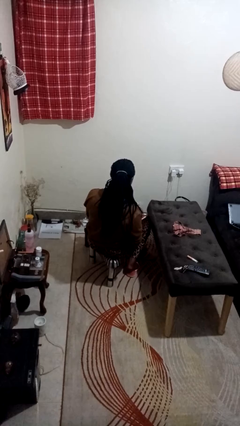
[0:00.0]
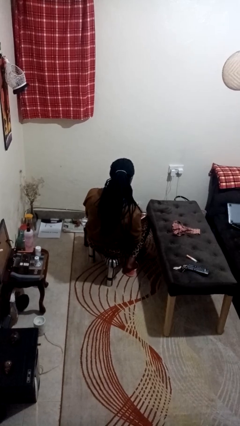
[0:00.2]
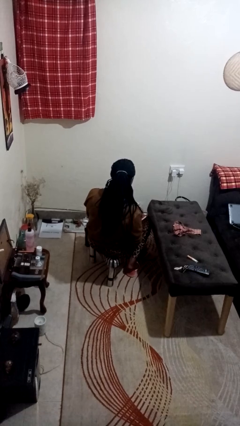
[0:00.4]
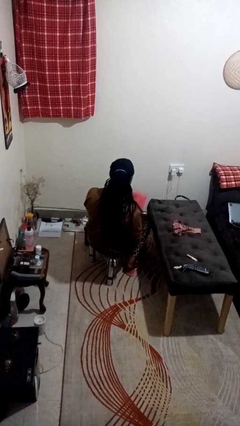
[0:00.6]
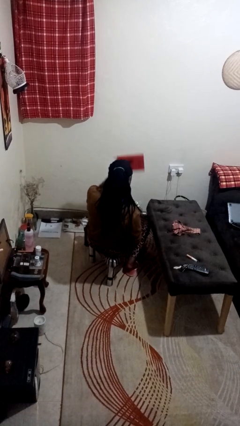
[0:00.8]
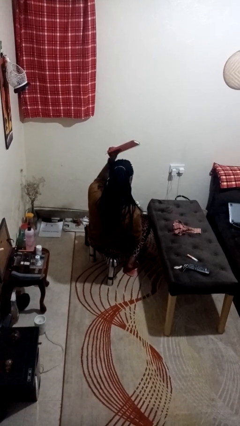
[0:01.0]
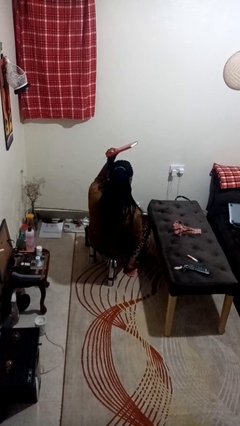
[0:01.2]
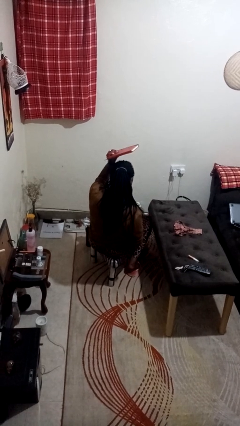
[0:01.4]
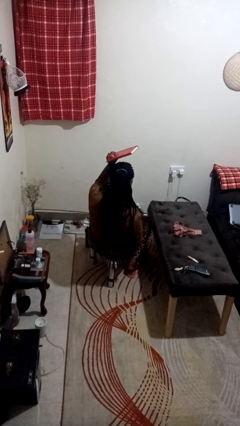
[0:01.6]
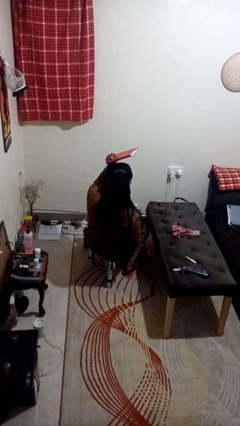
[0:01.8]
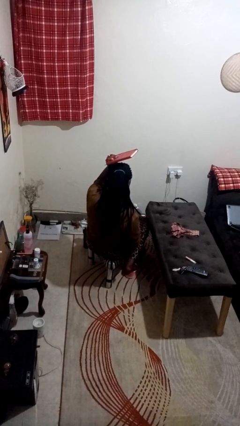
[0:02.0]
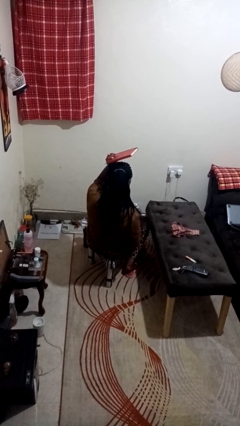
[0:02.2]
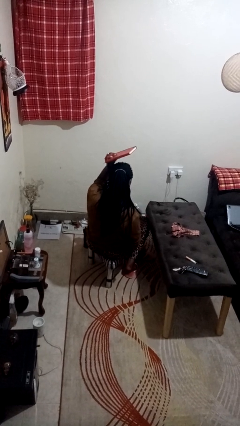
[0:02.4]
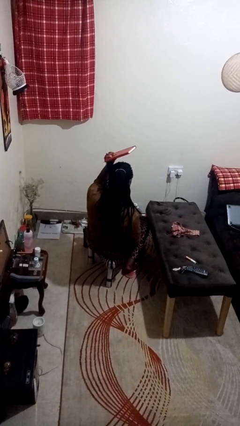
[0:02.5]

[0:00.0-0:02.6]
person holds object above head

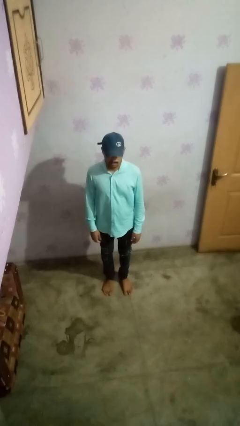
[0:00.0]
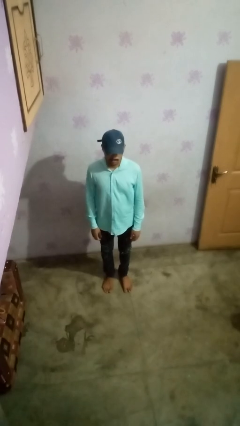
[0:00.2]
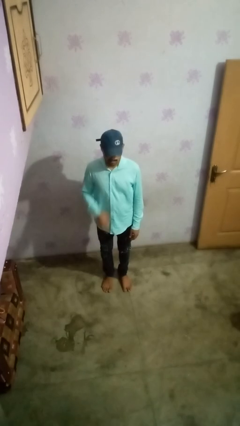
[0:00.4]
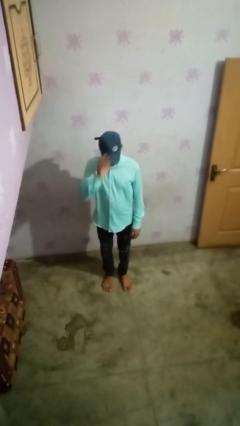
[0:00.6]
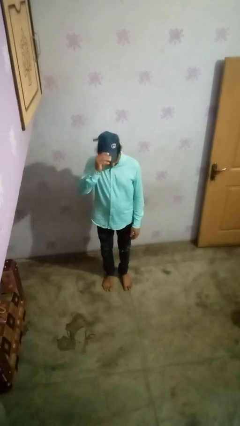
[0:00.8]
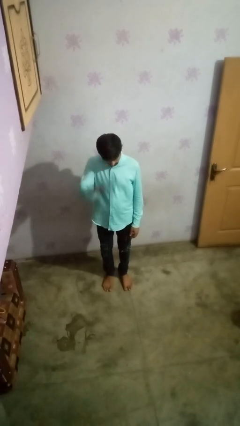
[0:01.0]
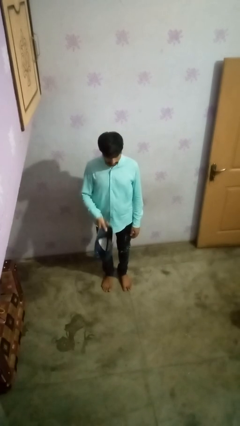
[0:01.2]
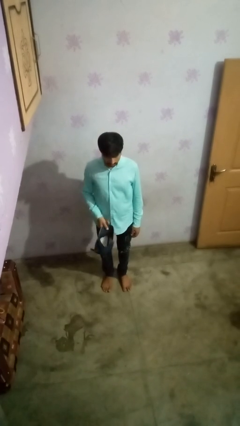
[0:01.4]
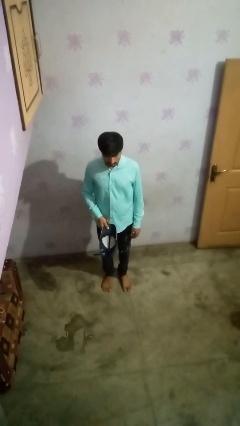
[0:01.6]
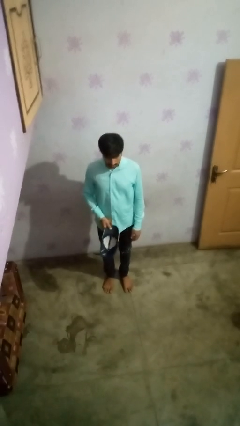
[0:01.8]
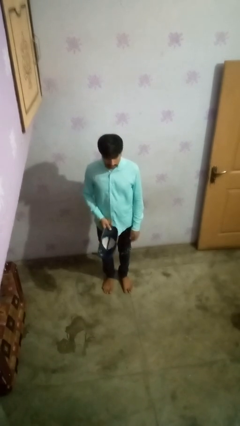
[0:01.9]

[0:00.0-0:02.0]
person takes off hat

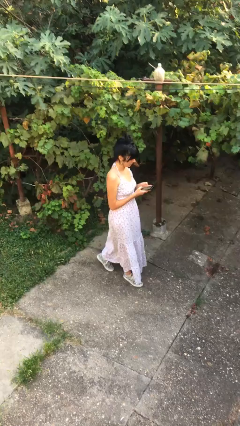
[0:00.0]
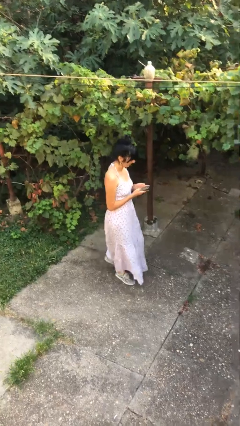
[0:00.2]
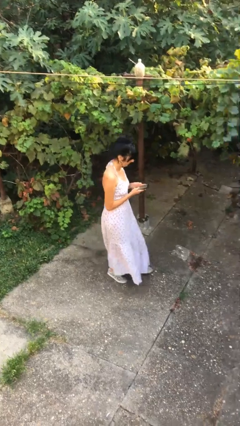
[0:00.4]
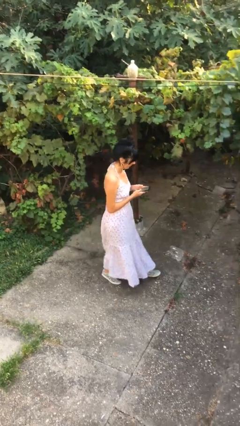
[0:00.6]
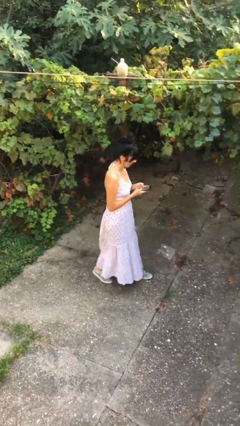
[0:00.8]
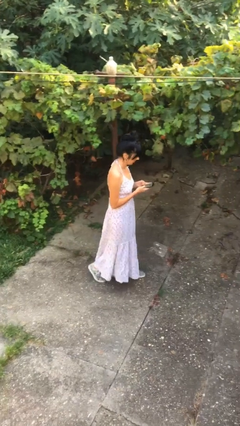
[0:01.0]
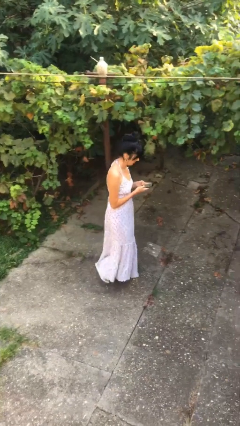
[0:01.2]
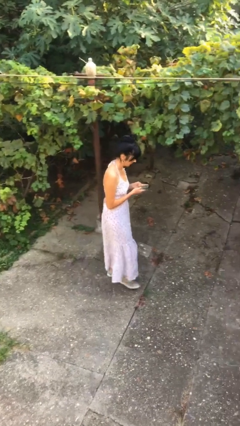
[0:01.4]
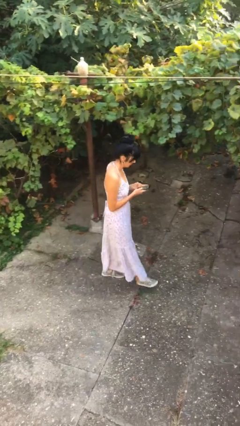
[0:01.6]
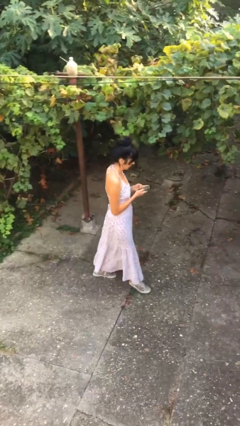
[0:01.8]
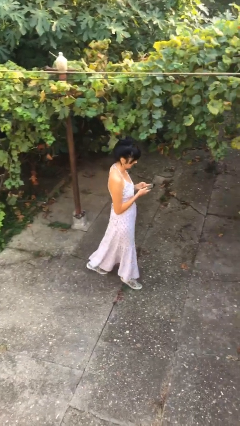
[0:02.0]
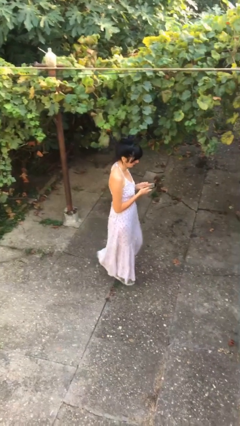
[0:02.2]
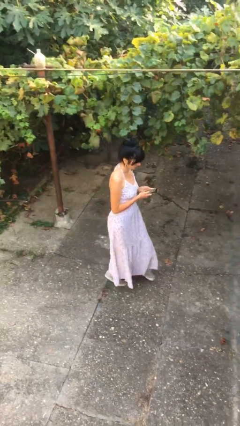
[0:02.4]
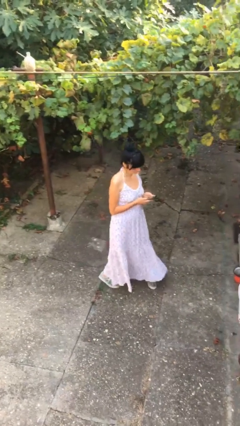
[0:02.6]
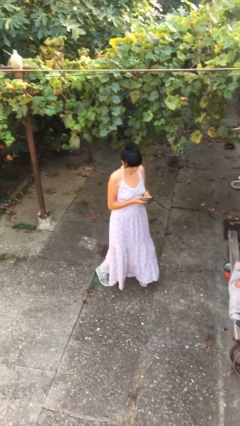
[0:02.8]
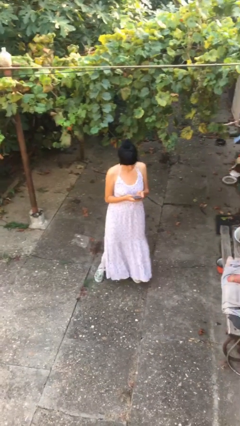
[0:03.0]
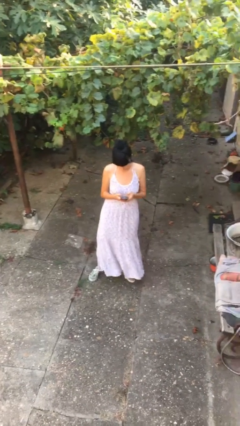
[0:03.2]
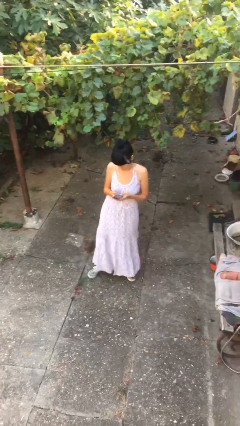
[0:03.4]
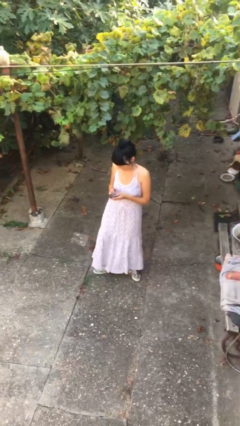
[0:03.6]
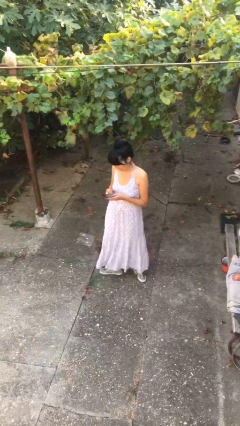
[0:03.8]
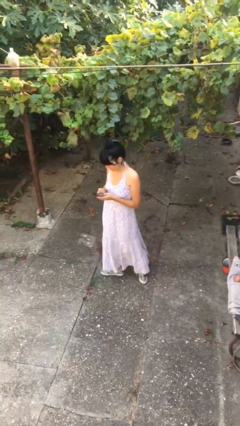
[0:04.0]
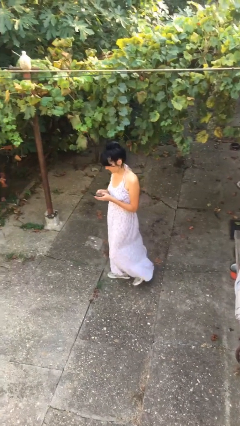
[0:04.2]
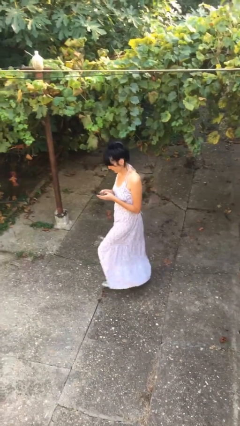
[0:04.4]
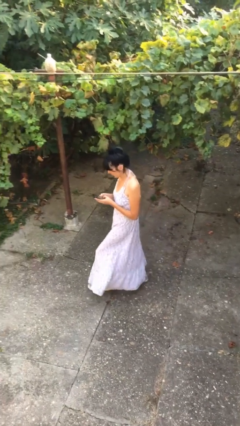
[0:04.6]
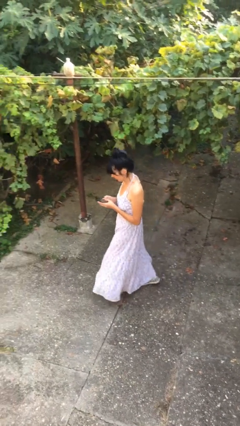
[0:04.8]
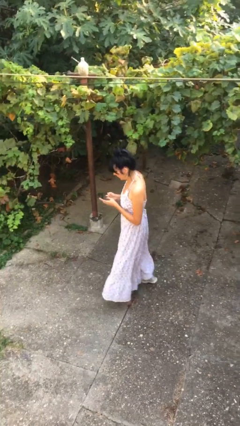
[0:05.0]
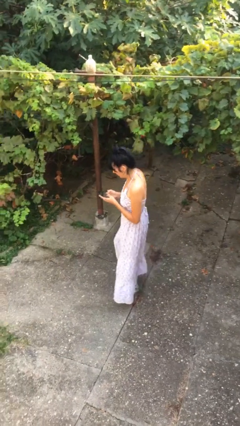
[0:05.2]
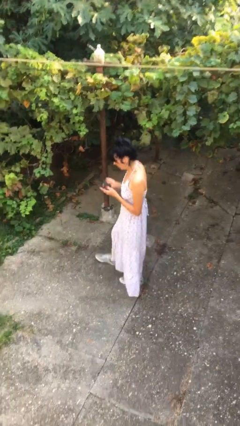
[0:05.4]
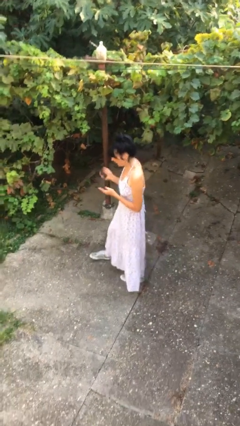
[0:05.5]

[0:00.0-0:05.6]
person texts on phone

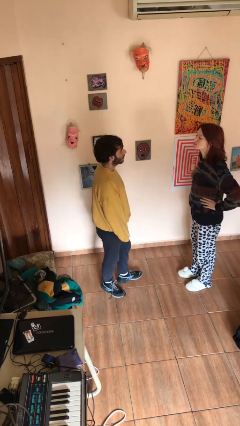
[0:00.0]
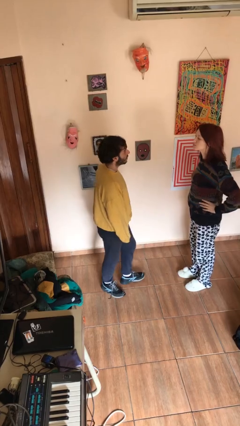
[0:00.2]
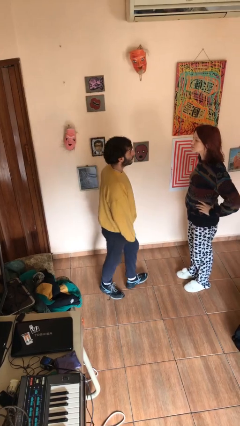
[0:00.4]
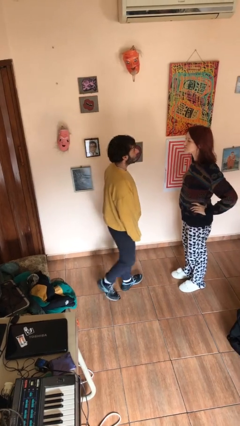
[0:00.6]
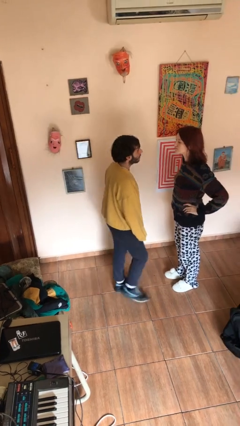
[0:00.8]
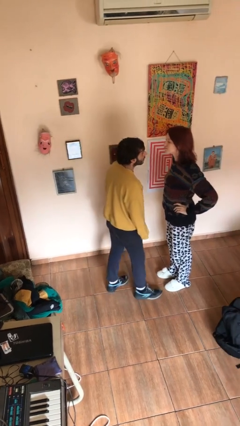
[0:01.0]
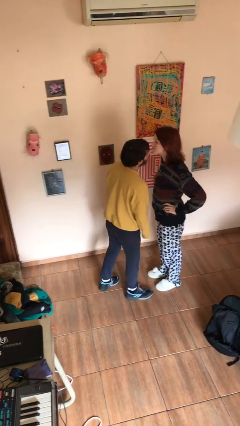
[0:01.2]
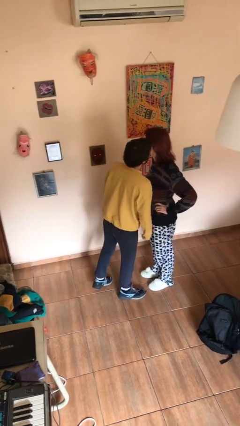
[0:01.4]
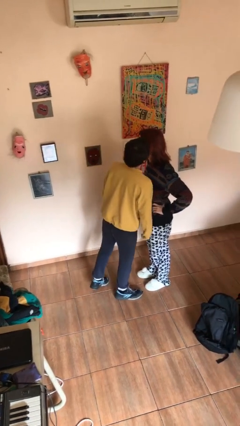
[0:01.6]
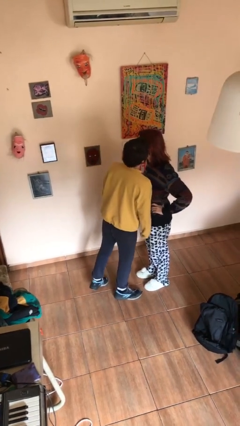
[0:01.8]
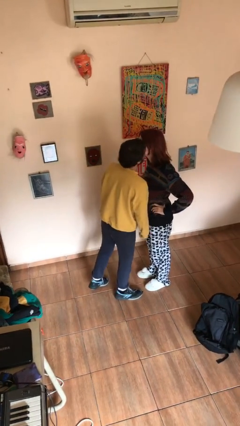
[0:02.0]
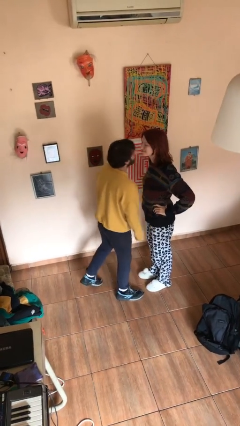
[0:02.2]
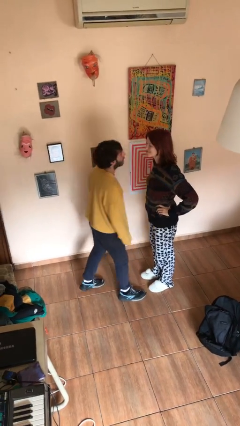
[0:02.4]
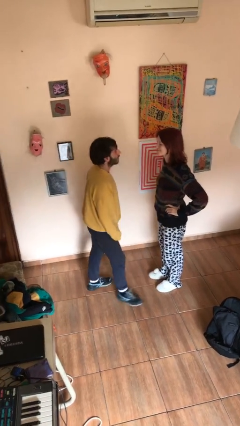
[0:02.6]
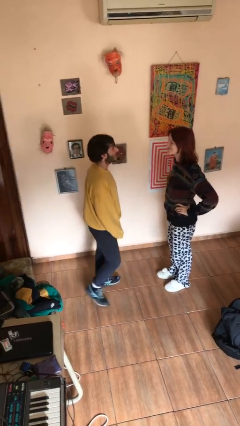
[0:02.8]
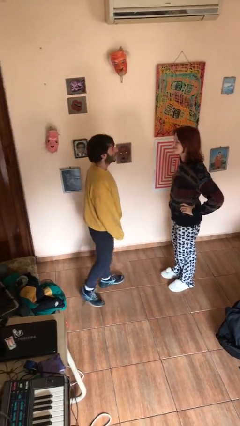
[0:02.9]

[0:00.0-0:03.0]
person kisses cheek of person

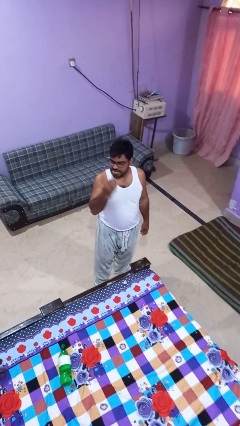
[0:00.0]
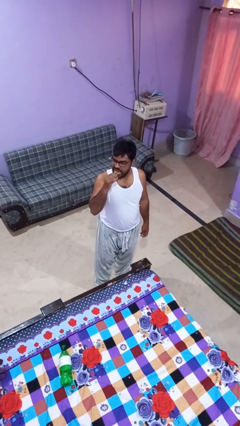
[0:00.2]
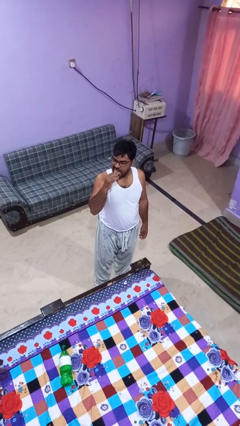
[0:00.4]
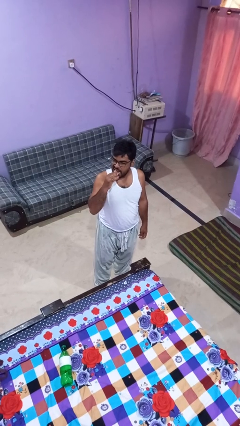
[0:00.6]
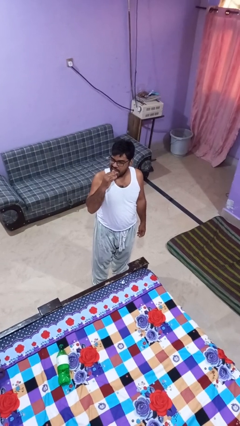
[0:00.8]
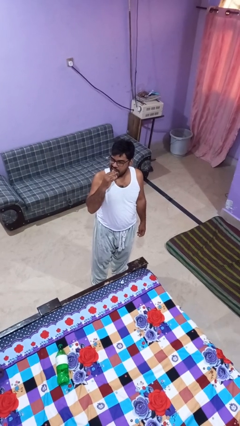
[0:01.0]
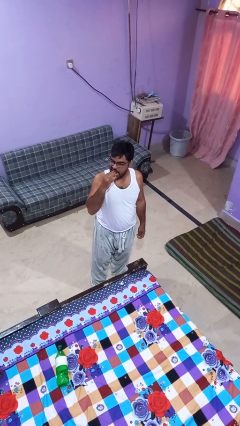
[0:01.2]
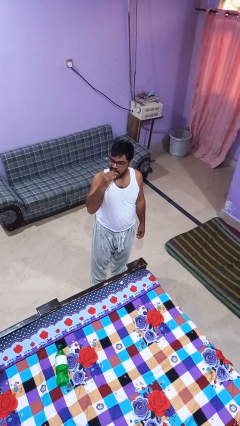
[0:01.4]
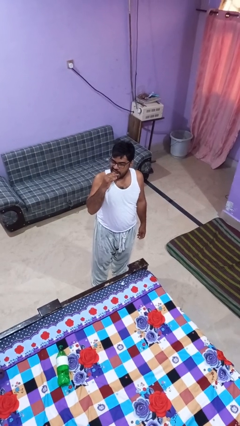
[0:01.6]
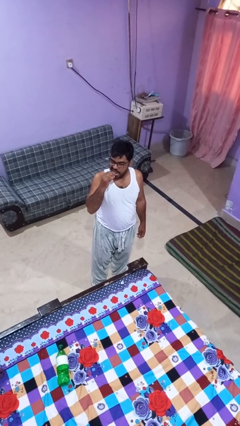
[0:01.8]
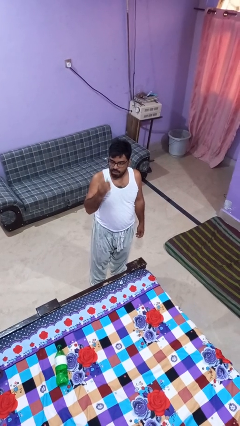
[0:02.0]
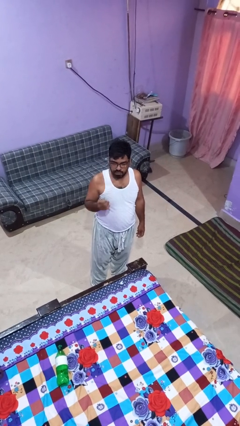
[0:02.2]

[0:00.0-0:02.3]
person flosses

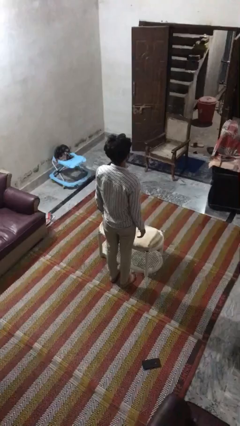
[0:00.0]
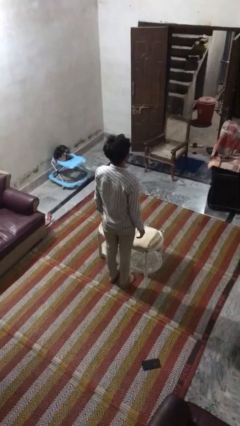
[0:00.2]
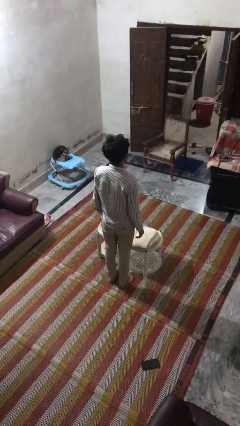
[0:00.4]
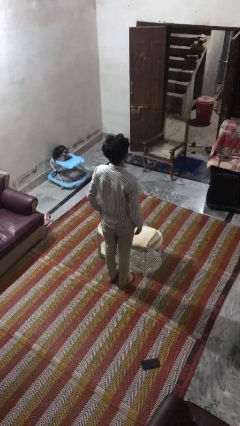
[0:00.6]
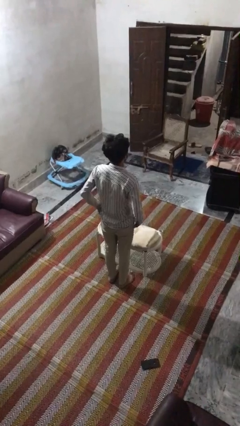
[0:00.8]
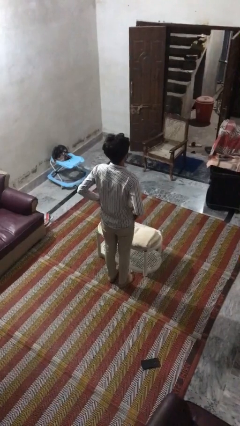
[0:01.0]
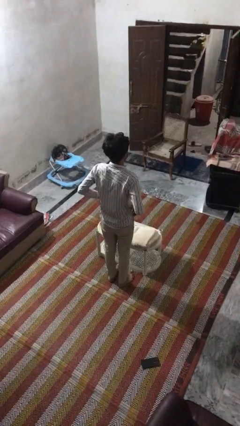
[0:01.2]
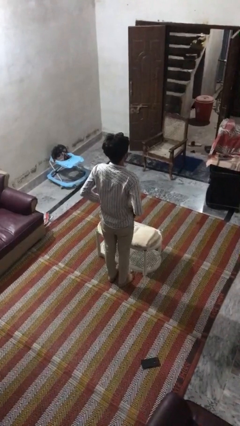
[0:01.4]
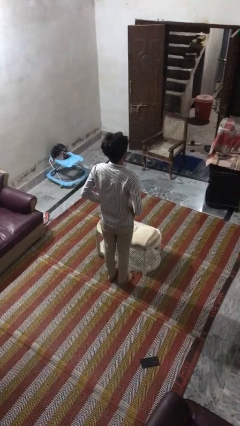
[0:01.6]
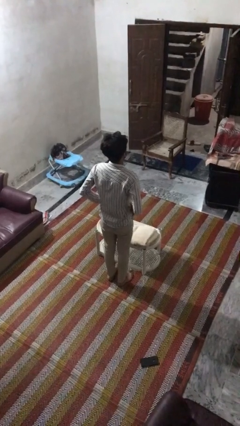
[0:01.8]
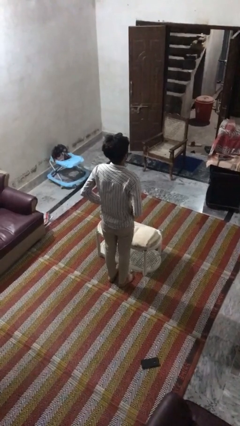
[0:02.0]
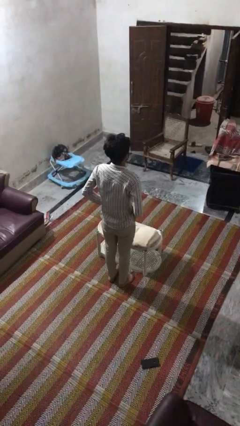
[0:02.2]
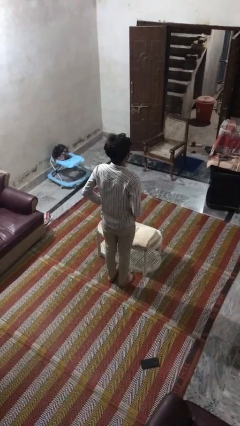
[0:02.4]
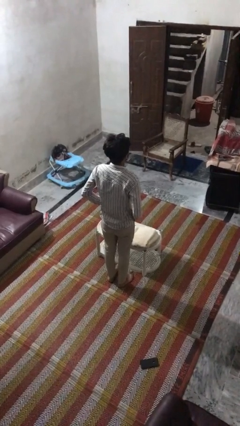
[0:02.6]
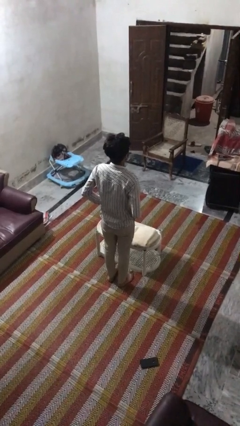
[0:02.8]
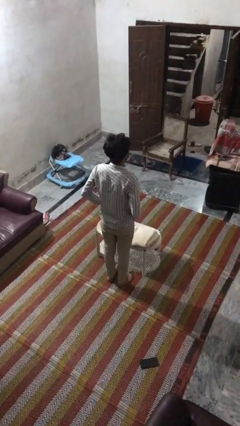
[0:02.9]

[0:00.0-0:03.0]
person puts hands in back pockets
